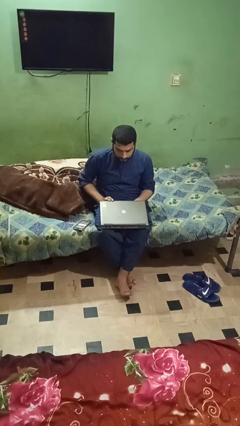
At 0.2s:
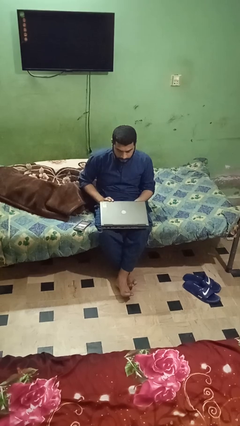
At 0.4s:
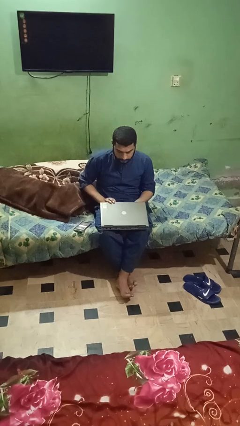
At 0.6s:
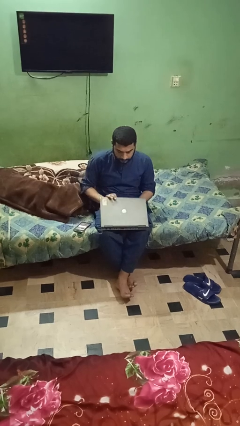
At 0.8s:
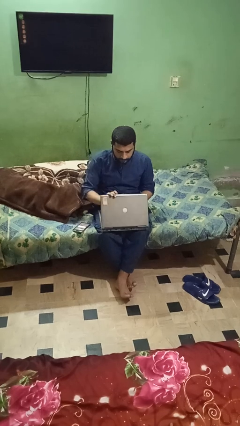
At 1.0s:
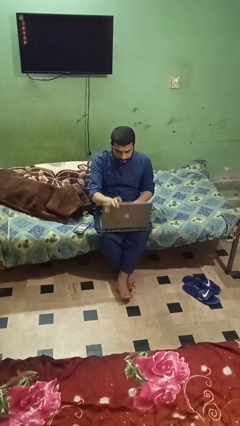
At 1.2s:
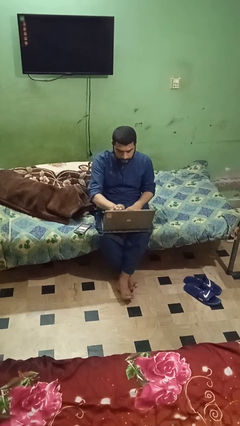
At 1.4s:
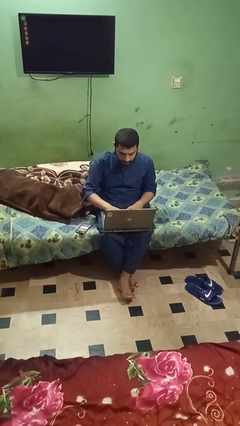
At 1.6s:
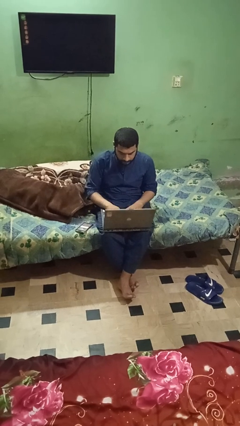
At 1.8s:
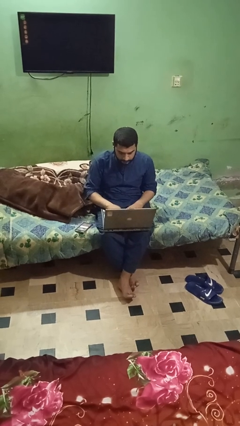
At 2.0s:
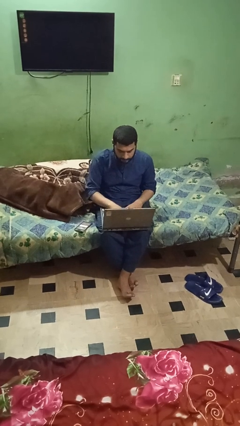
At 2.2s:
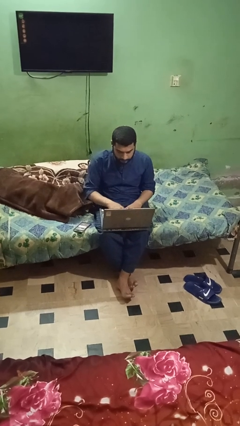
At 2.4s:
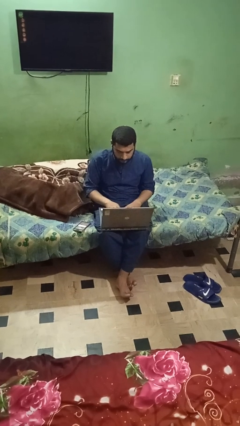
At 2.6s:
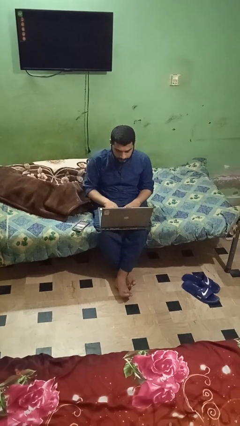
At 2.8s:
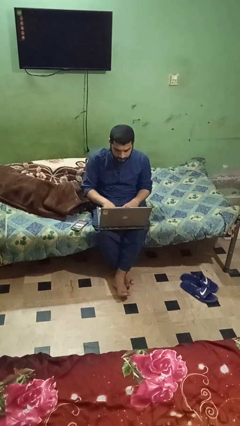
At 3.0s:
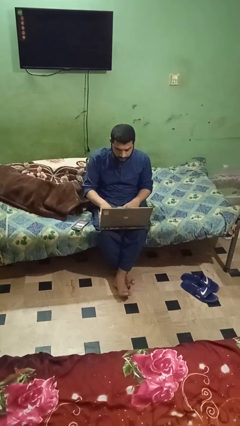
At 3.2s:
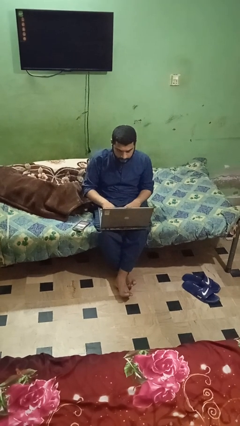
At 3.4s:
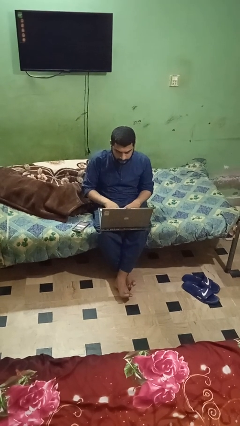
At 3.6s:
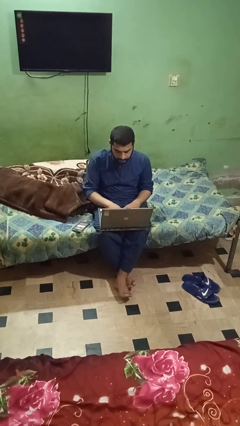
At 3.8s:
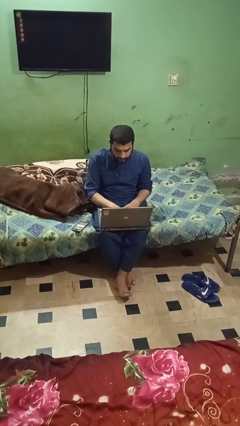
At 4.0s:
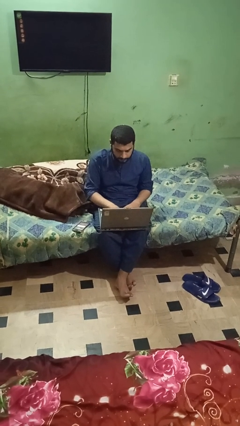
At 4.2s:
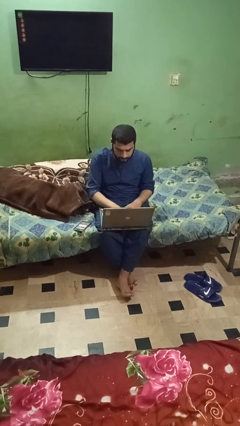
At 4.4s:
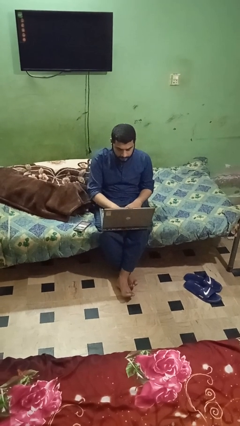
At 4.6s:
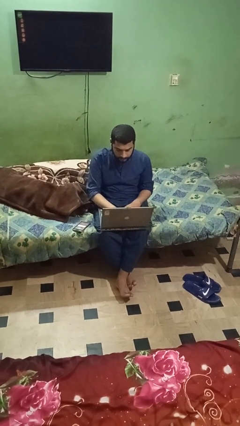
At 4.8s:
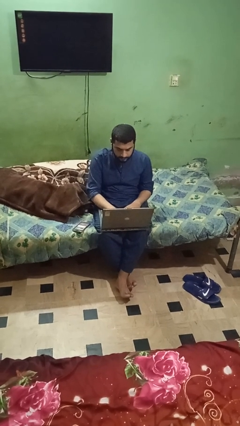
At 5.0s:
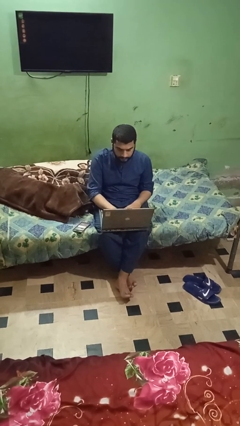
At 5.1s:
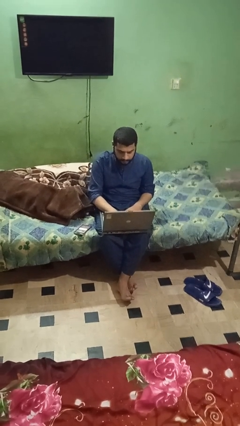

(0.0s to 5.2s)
person opens laptop

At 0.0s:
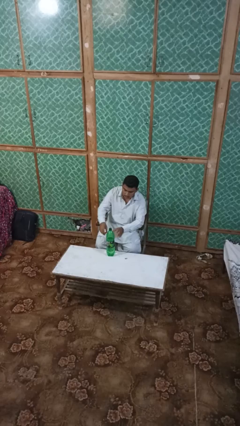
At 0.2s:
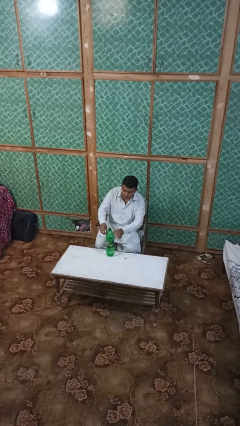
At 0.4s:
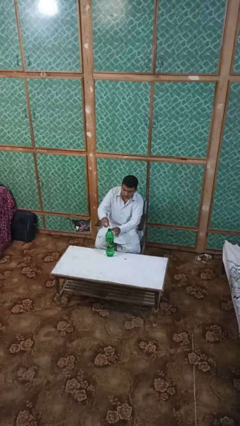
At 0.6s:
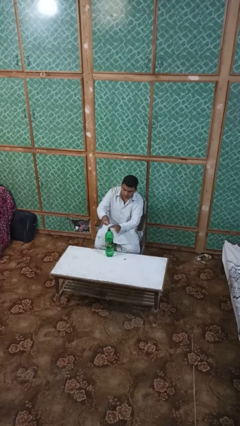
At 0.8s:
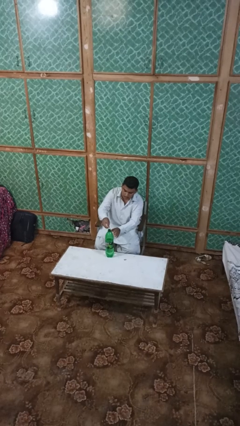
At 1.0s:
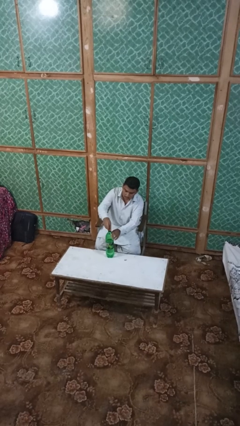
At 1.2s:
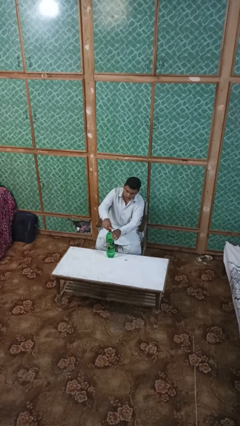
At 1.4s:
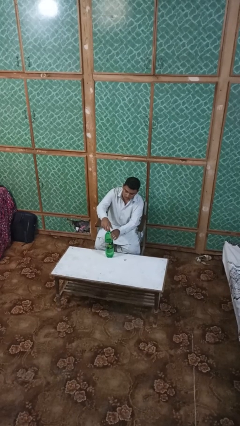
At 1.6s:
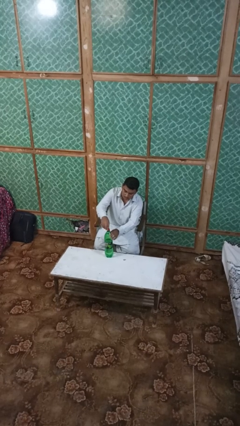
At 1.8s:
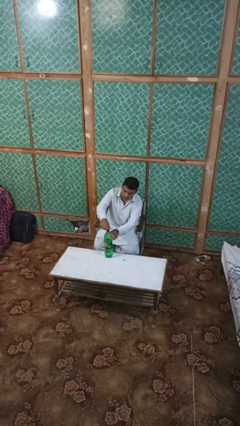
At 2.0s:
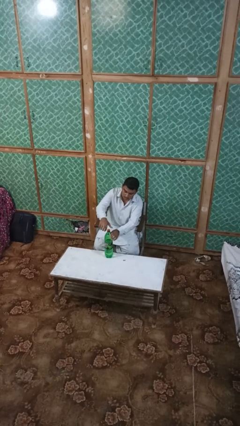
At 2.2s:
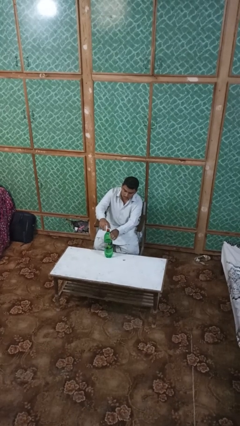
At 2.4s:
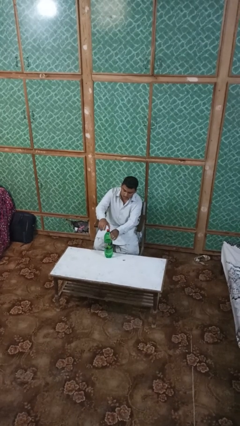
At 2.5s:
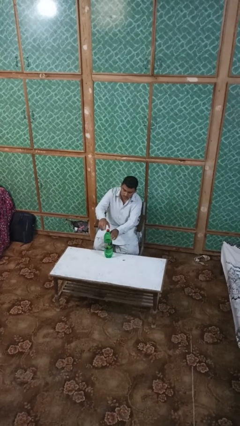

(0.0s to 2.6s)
person screws lid to bottle

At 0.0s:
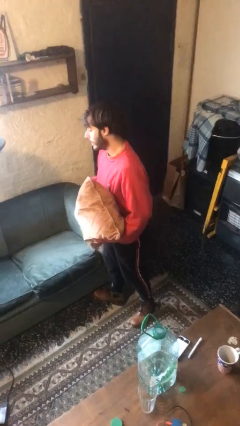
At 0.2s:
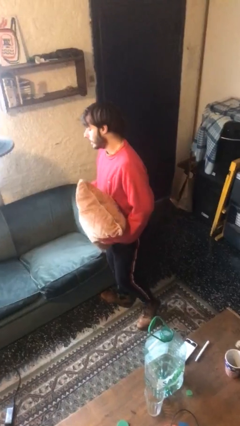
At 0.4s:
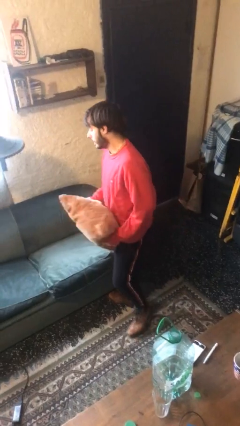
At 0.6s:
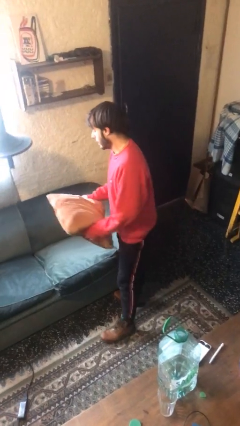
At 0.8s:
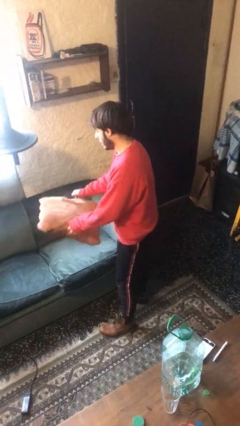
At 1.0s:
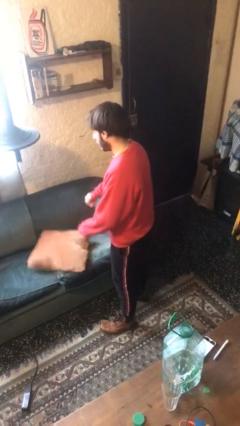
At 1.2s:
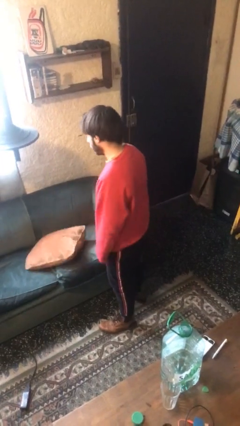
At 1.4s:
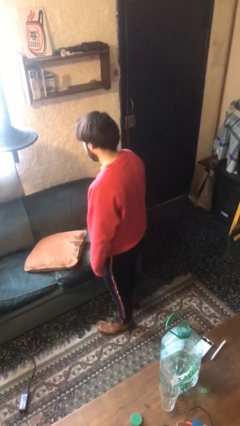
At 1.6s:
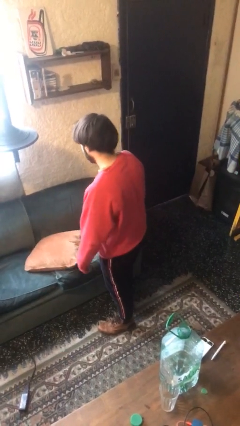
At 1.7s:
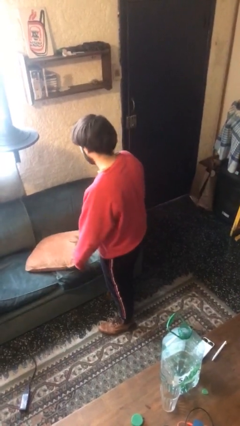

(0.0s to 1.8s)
person puts down object on couch

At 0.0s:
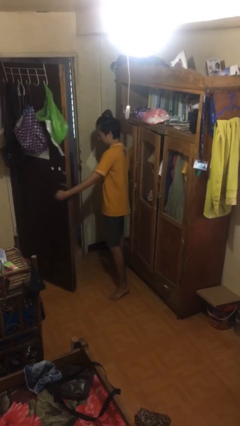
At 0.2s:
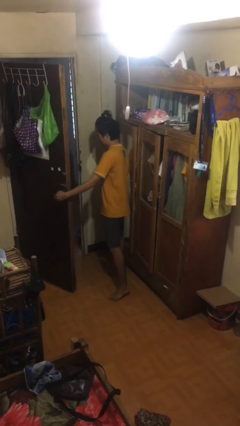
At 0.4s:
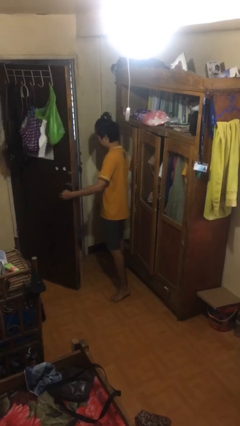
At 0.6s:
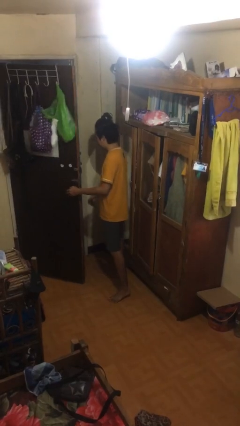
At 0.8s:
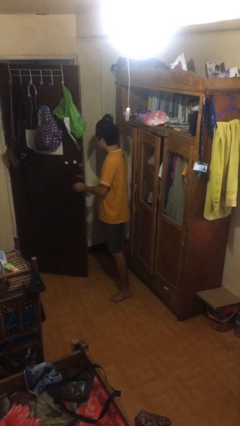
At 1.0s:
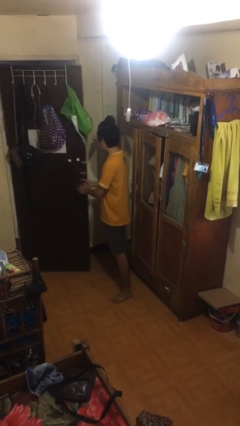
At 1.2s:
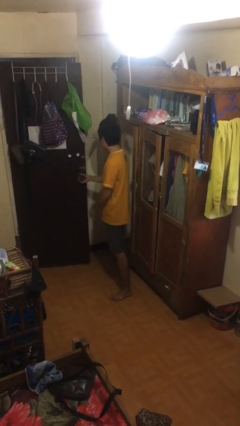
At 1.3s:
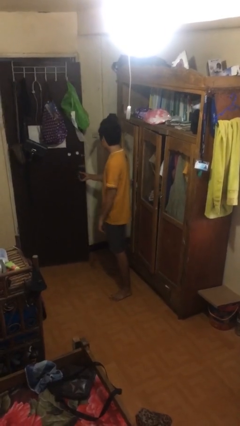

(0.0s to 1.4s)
person closes facility door

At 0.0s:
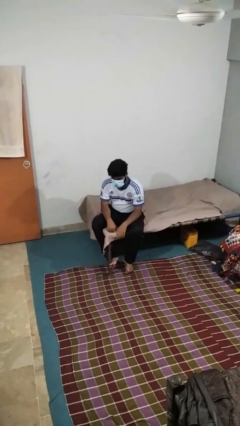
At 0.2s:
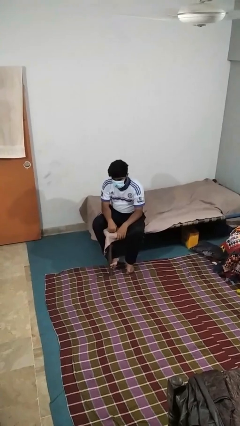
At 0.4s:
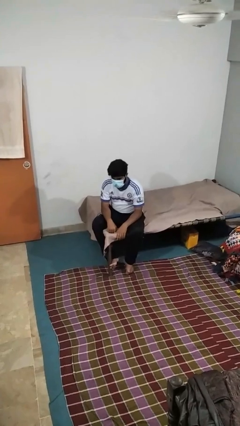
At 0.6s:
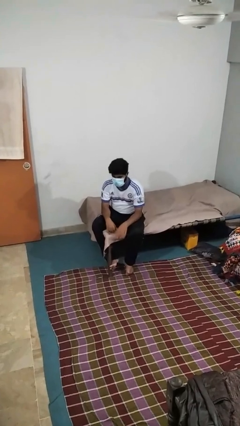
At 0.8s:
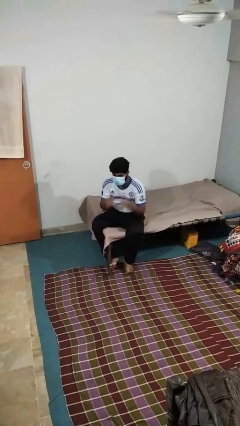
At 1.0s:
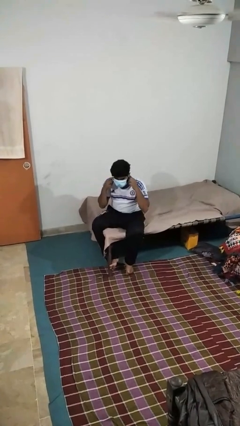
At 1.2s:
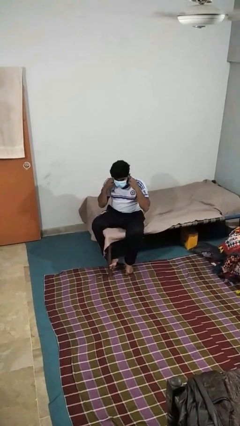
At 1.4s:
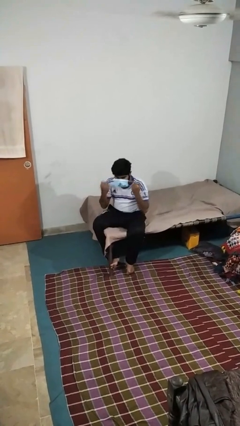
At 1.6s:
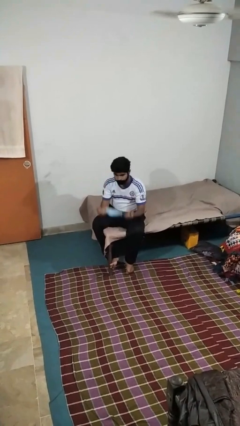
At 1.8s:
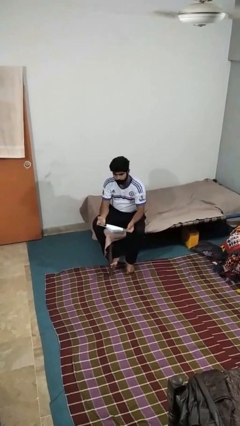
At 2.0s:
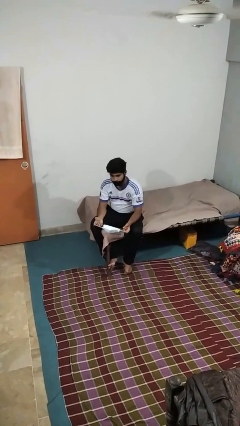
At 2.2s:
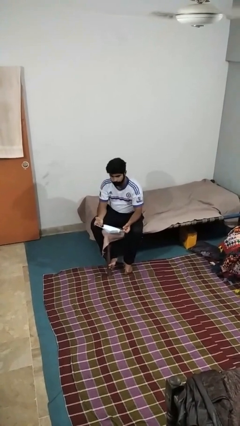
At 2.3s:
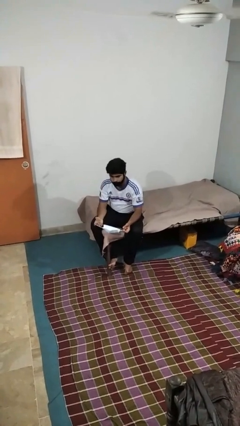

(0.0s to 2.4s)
person takes off facemask

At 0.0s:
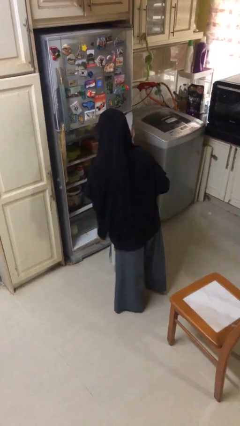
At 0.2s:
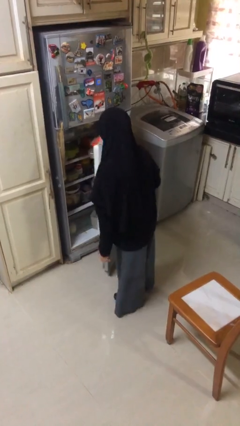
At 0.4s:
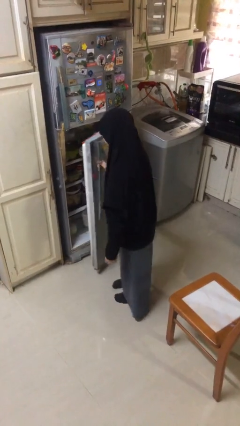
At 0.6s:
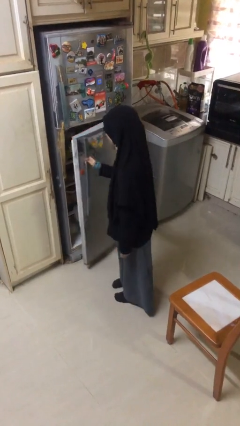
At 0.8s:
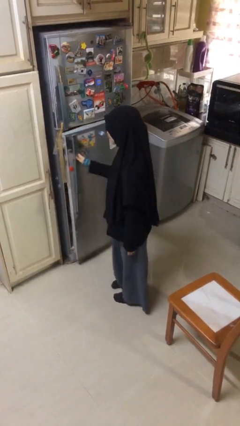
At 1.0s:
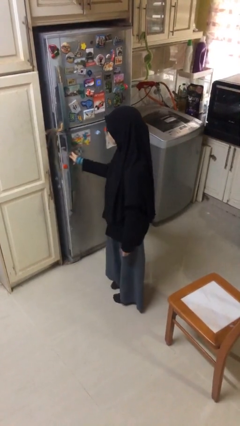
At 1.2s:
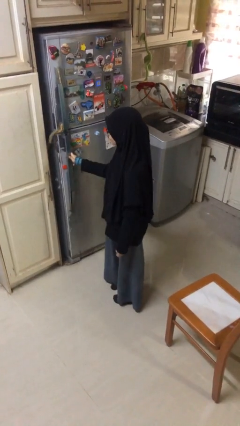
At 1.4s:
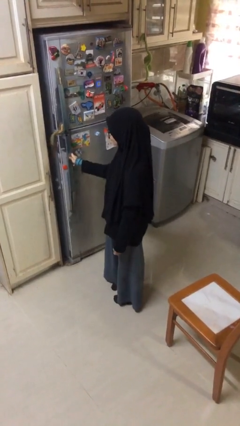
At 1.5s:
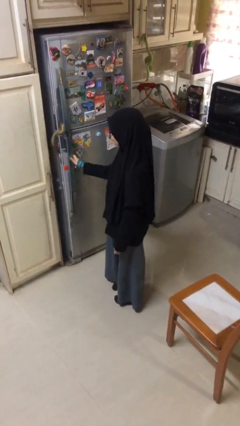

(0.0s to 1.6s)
person closes refrigerator

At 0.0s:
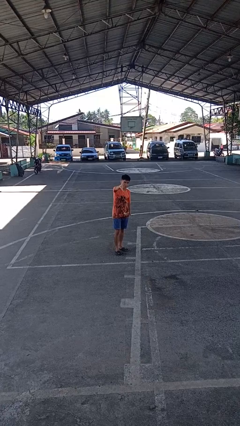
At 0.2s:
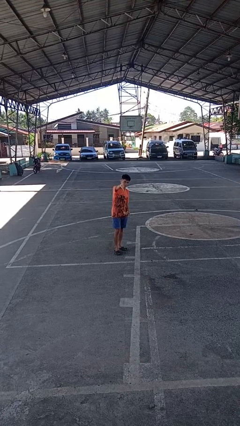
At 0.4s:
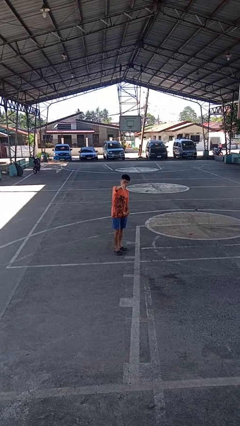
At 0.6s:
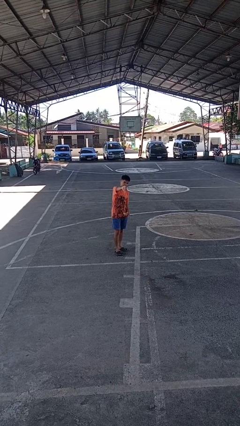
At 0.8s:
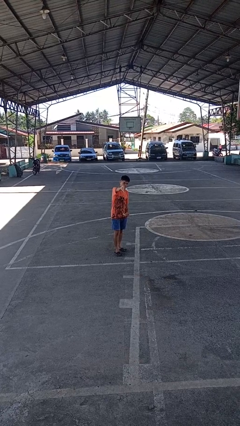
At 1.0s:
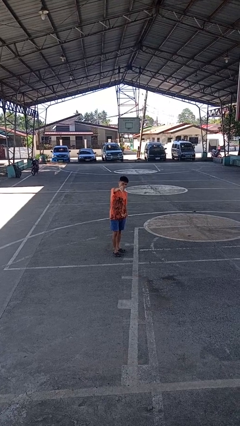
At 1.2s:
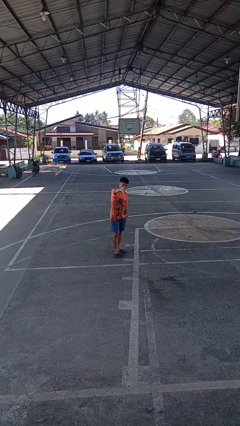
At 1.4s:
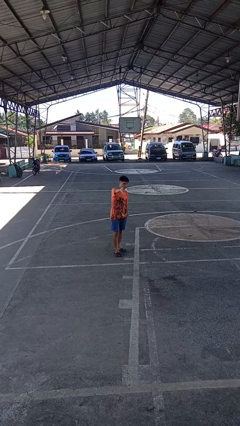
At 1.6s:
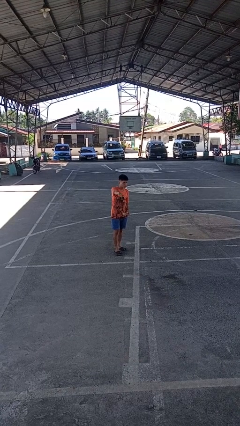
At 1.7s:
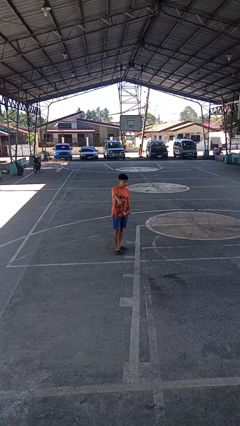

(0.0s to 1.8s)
person gestures thumbs down

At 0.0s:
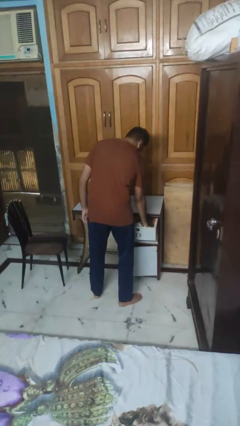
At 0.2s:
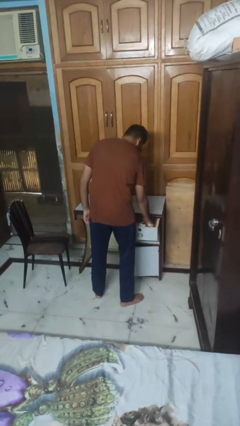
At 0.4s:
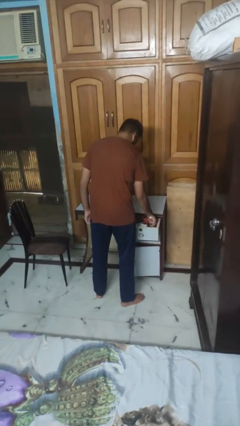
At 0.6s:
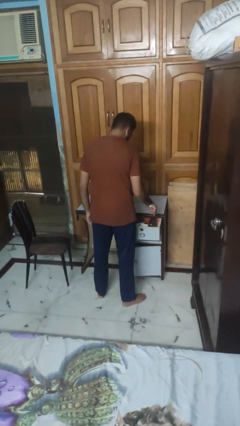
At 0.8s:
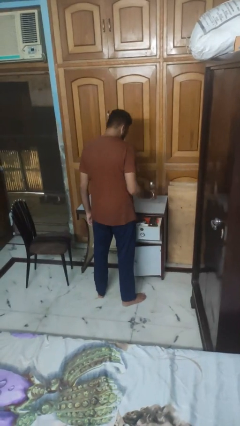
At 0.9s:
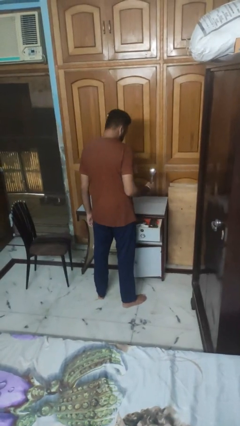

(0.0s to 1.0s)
person takes object from kitchen drawer
